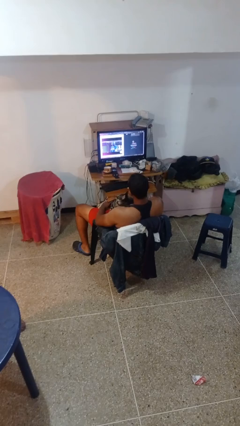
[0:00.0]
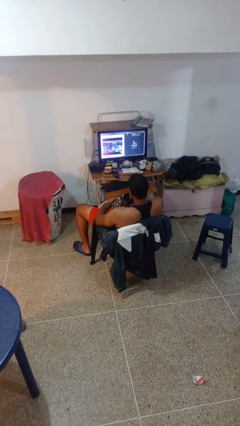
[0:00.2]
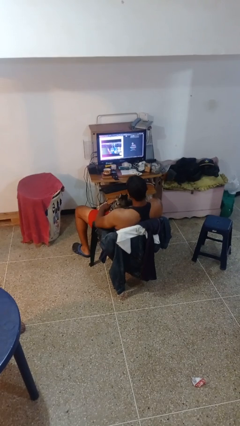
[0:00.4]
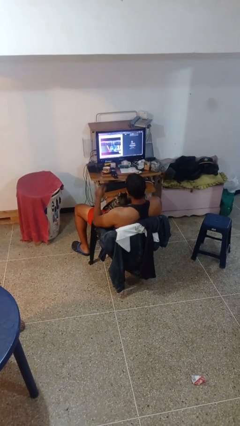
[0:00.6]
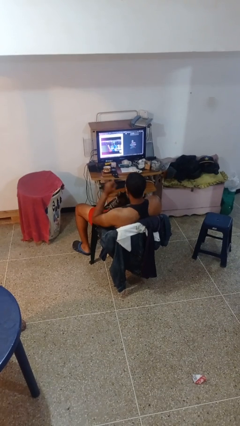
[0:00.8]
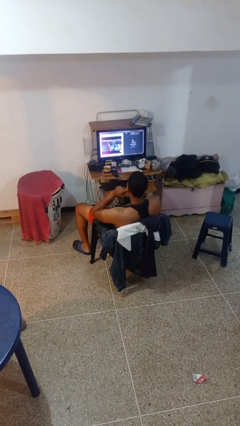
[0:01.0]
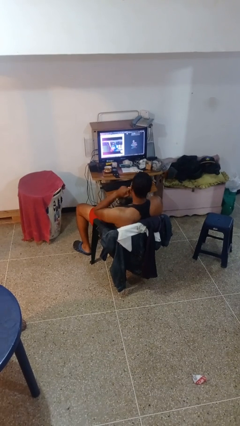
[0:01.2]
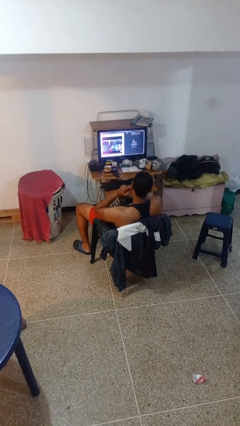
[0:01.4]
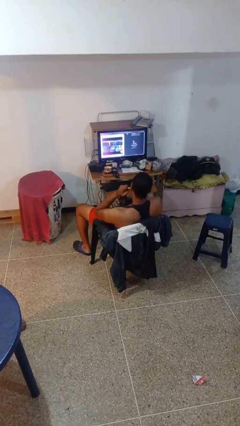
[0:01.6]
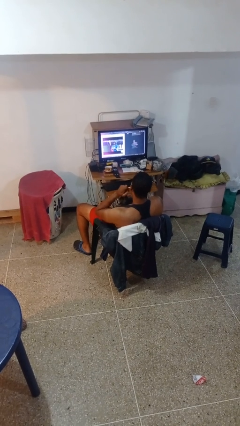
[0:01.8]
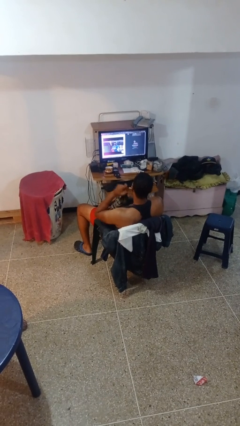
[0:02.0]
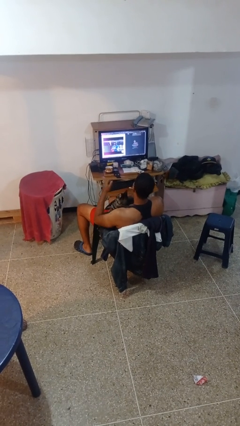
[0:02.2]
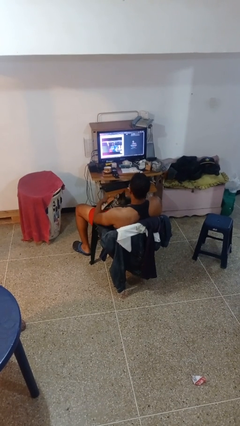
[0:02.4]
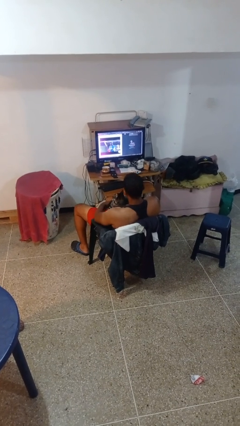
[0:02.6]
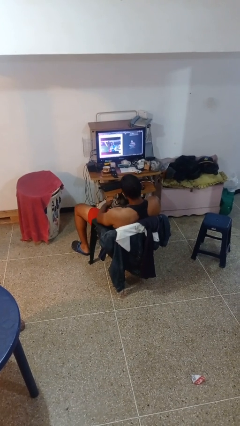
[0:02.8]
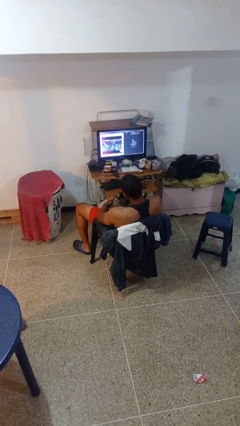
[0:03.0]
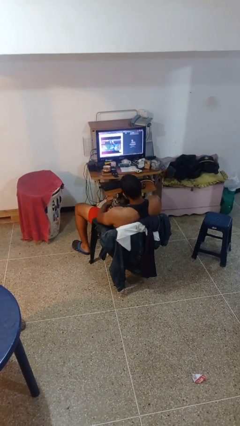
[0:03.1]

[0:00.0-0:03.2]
person gestures listen closely

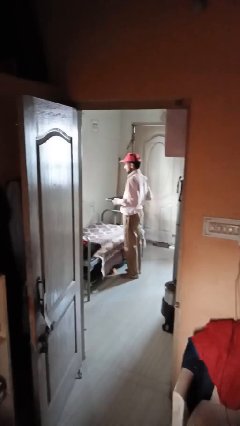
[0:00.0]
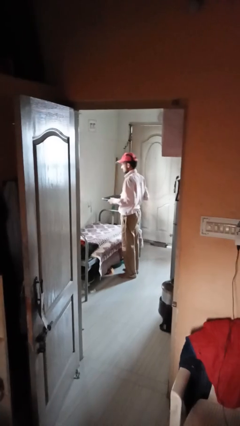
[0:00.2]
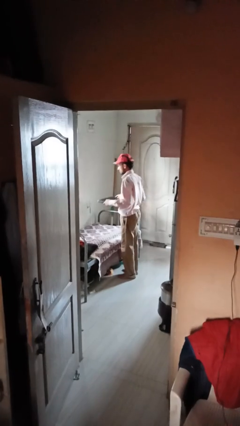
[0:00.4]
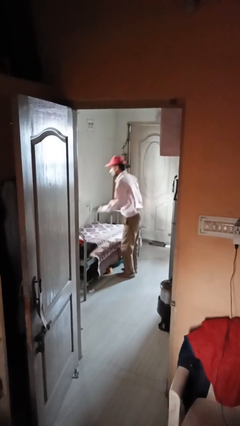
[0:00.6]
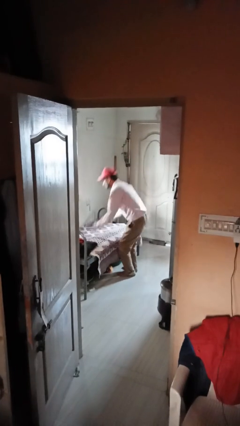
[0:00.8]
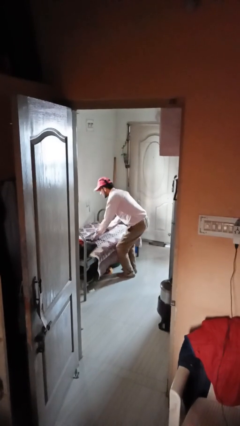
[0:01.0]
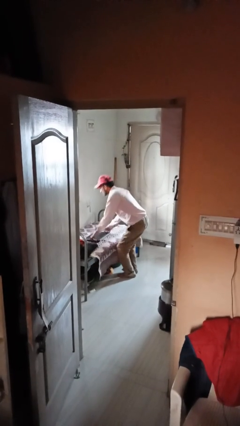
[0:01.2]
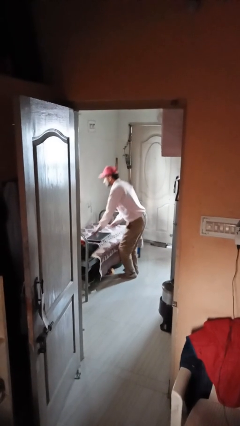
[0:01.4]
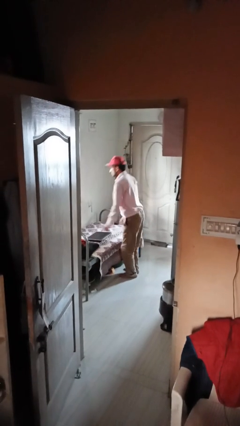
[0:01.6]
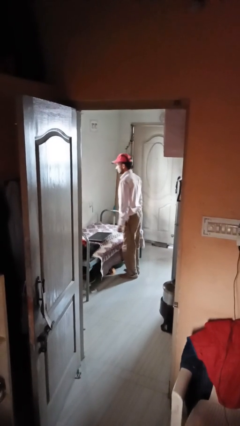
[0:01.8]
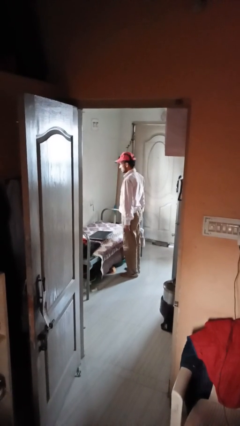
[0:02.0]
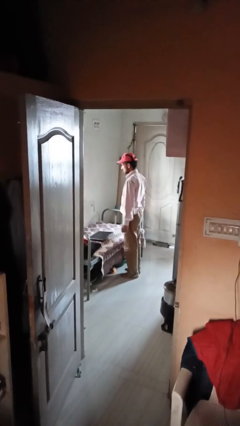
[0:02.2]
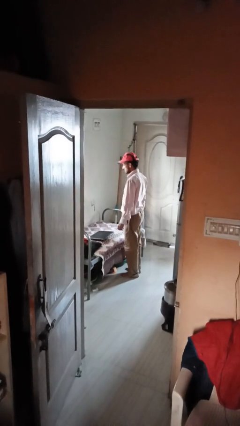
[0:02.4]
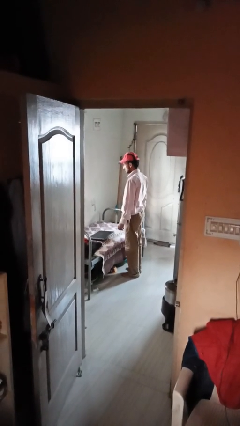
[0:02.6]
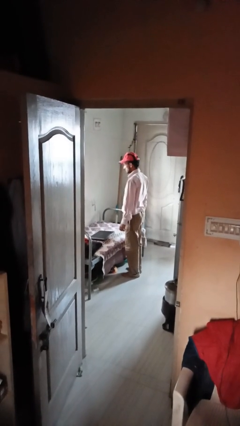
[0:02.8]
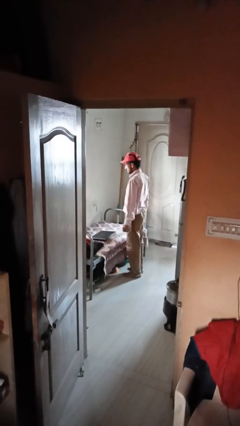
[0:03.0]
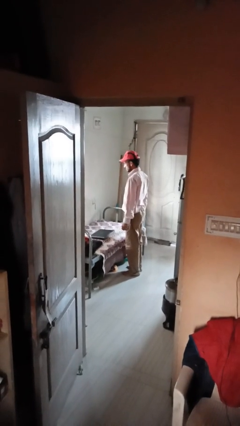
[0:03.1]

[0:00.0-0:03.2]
person puts down object on couch

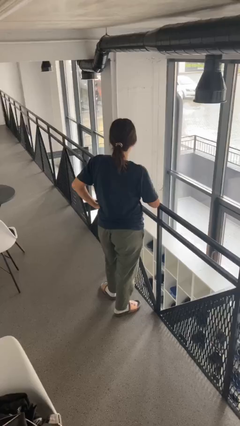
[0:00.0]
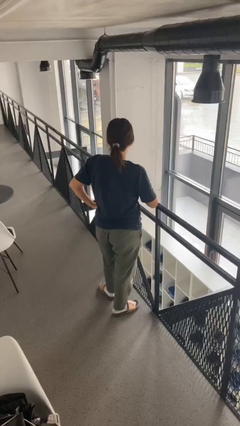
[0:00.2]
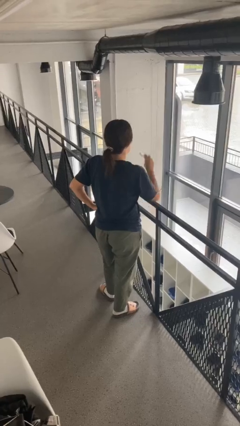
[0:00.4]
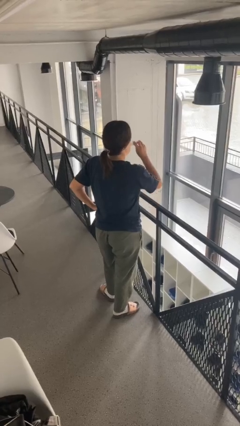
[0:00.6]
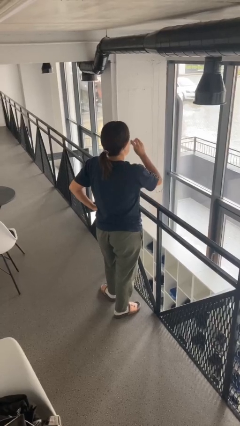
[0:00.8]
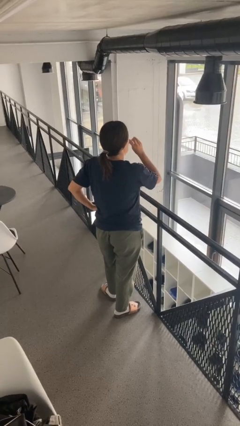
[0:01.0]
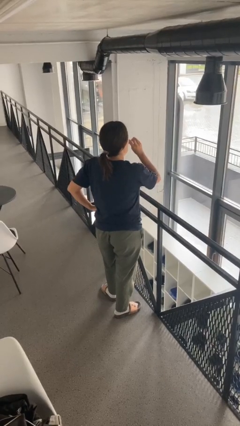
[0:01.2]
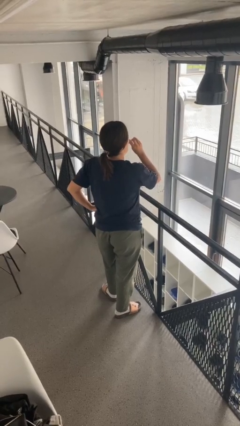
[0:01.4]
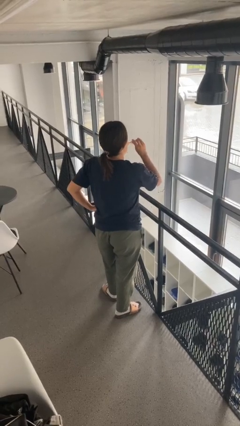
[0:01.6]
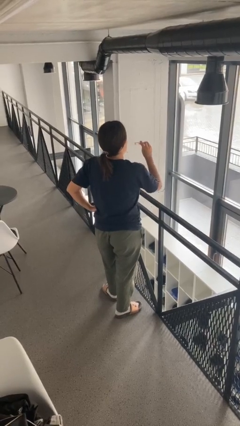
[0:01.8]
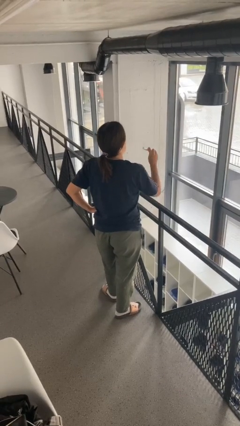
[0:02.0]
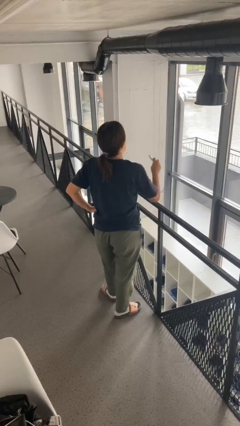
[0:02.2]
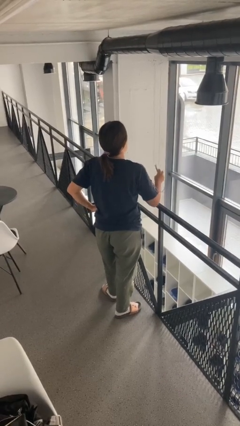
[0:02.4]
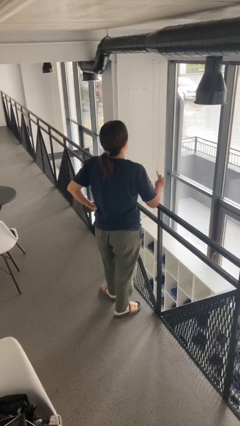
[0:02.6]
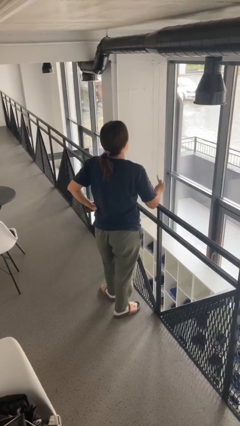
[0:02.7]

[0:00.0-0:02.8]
person vapes

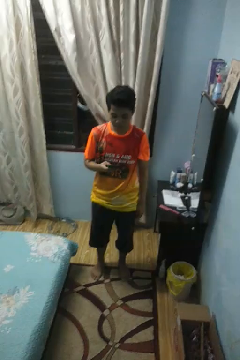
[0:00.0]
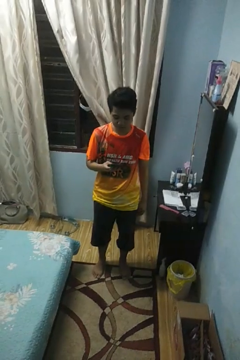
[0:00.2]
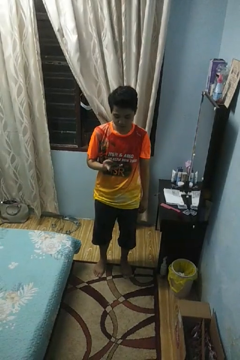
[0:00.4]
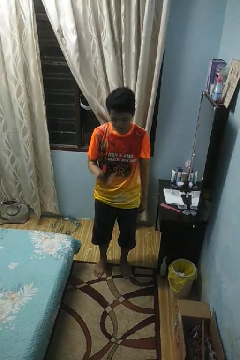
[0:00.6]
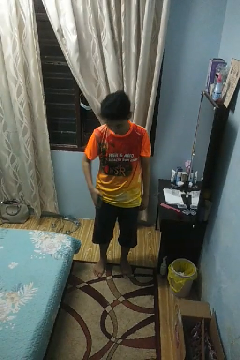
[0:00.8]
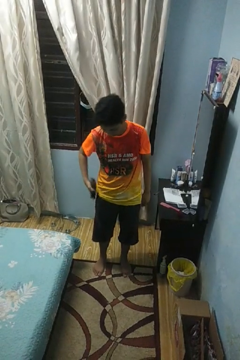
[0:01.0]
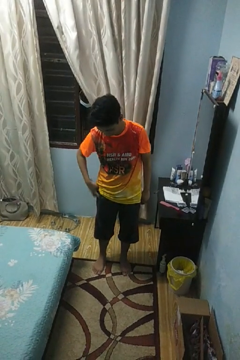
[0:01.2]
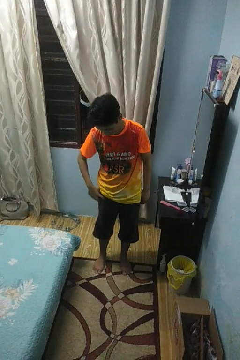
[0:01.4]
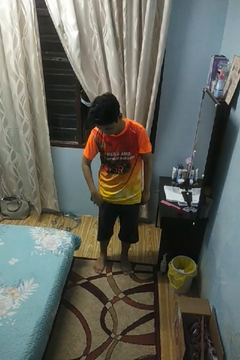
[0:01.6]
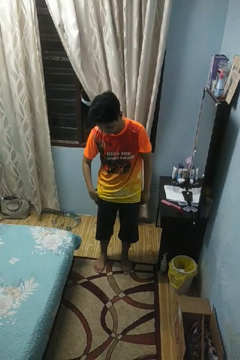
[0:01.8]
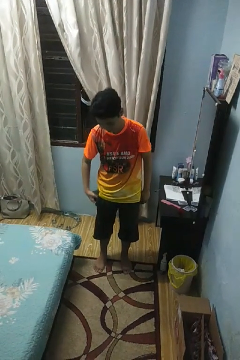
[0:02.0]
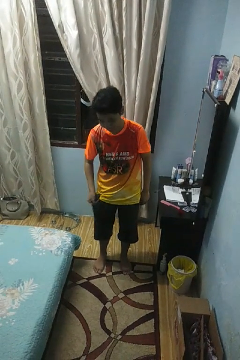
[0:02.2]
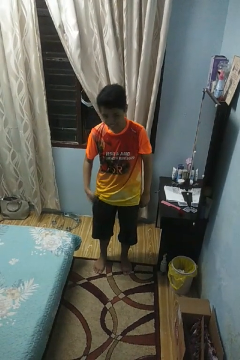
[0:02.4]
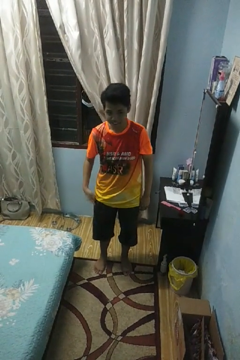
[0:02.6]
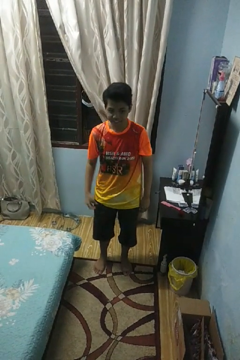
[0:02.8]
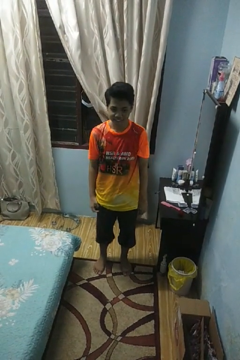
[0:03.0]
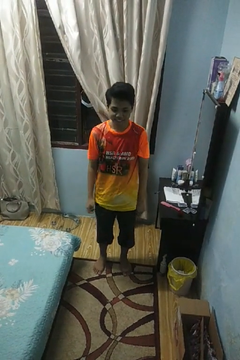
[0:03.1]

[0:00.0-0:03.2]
person puts phone into pocket

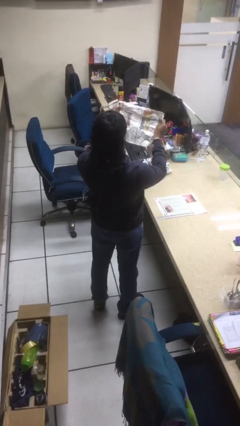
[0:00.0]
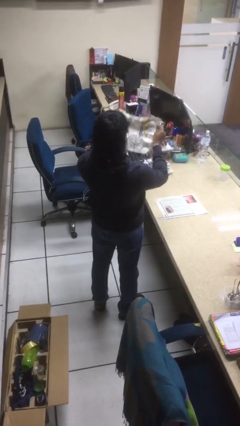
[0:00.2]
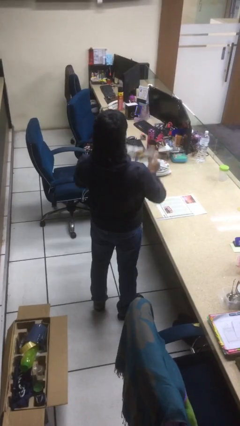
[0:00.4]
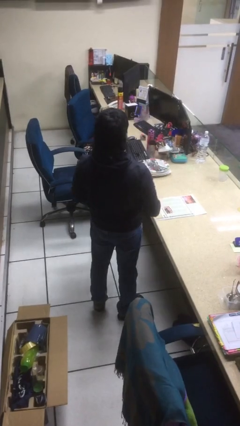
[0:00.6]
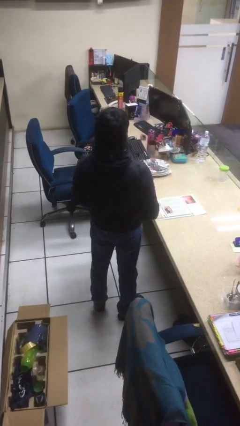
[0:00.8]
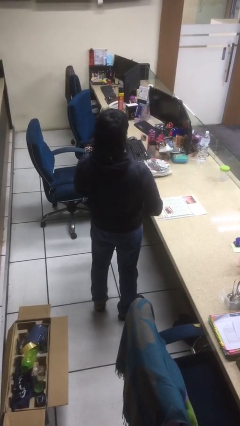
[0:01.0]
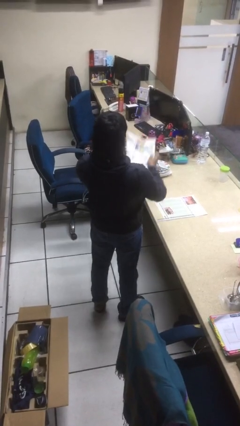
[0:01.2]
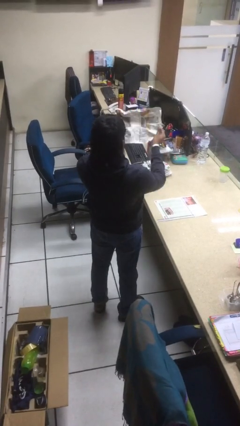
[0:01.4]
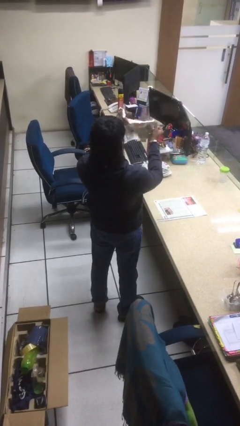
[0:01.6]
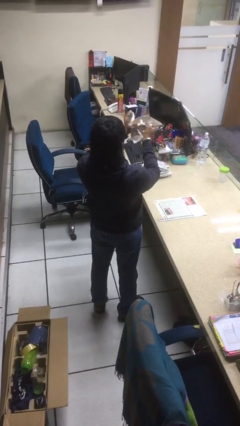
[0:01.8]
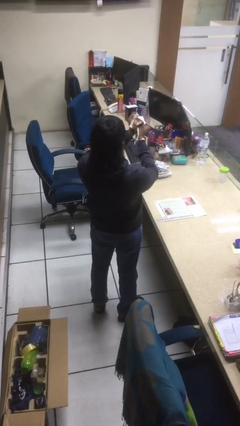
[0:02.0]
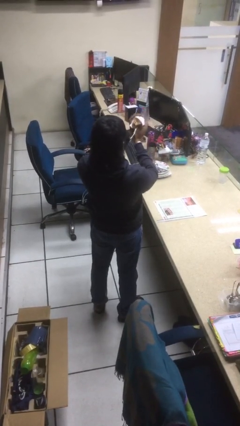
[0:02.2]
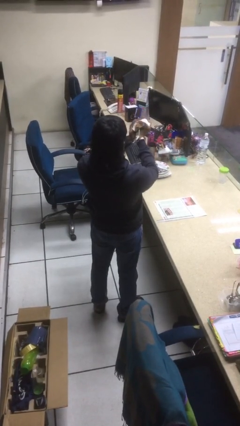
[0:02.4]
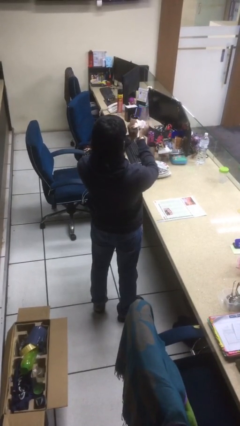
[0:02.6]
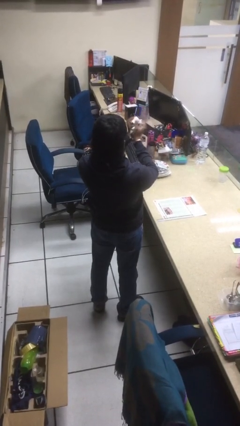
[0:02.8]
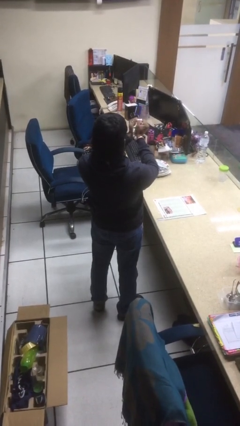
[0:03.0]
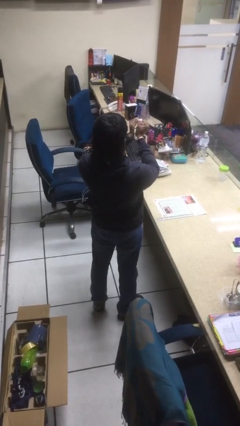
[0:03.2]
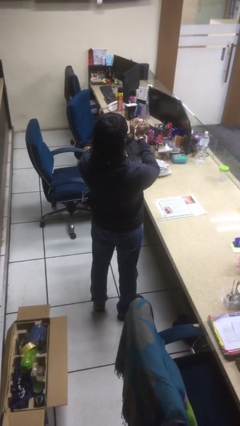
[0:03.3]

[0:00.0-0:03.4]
person crumples paper

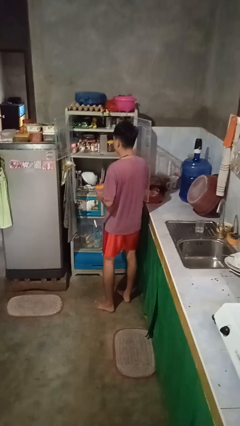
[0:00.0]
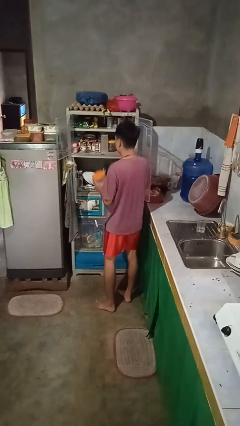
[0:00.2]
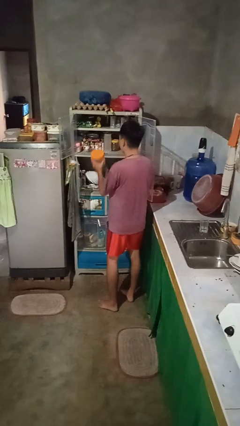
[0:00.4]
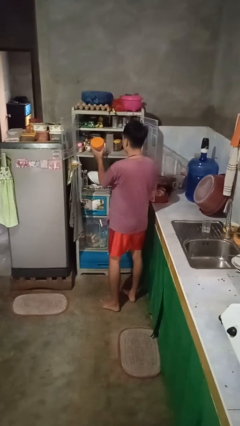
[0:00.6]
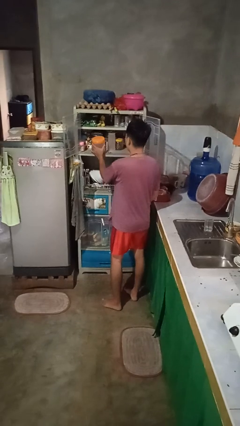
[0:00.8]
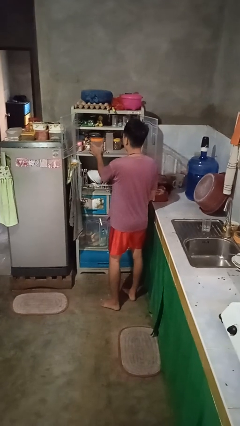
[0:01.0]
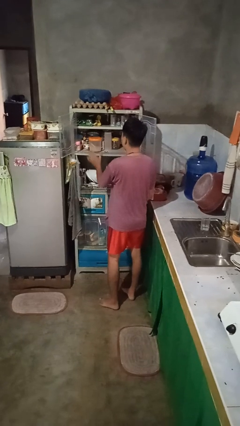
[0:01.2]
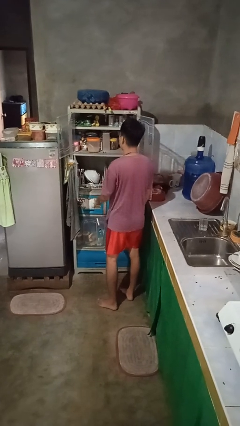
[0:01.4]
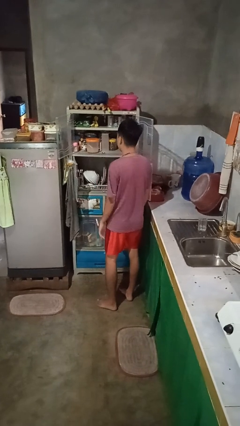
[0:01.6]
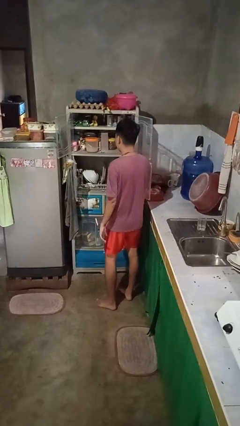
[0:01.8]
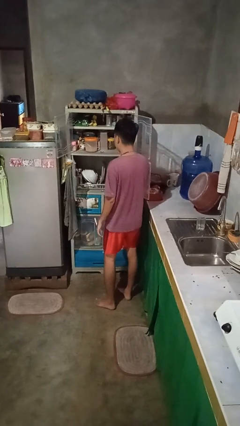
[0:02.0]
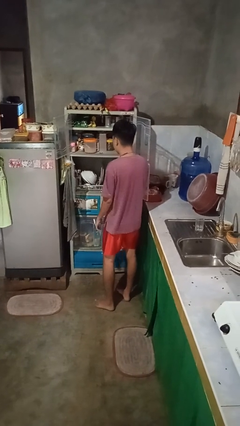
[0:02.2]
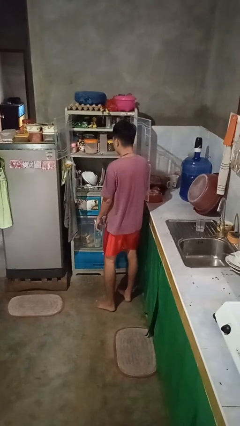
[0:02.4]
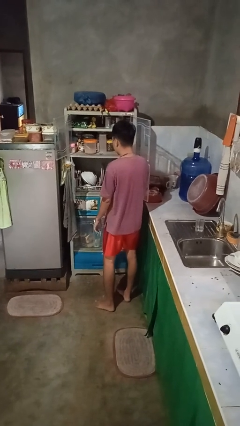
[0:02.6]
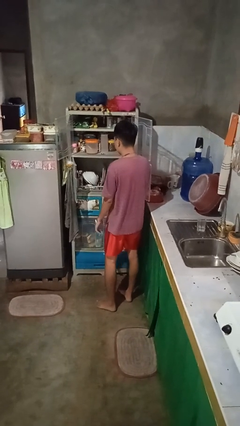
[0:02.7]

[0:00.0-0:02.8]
person puts object in cabinet
